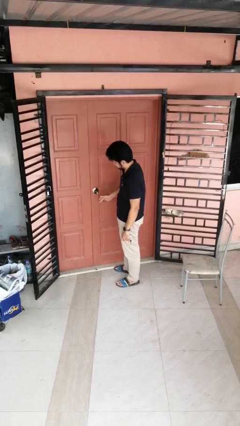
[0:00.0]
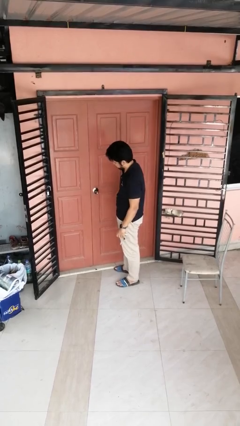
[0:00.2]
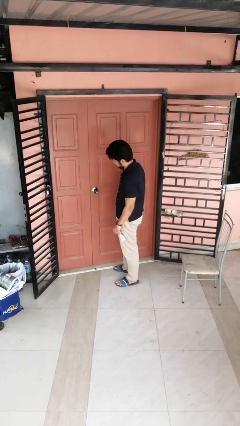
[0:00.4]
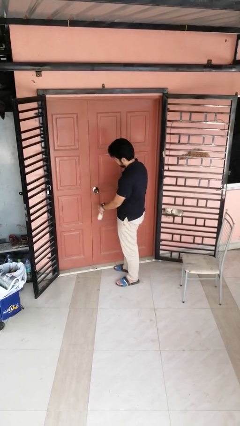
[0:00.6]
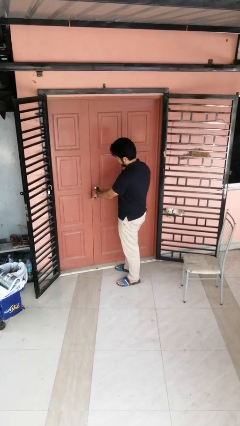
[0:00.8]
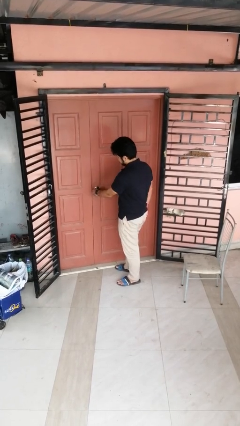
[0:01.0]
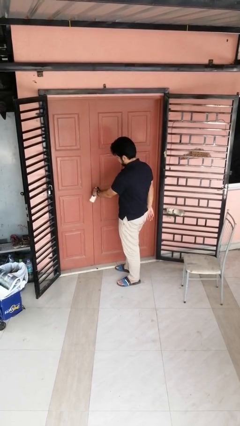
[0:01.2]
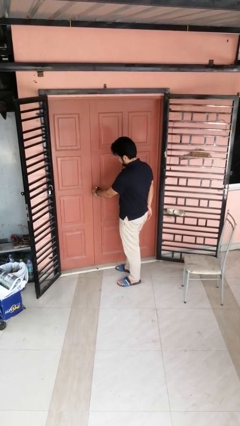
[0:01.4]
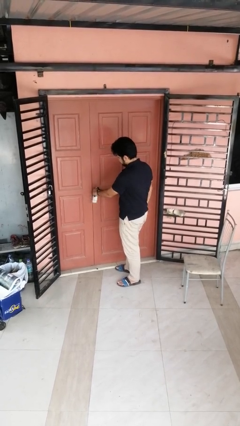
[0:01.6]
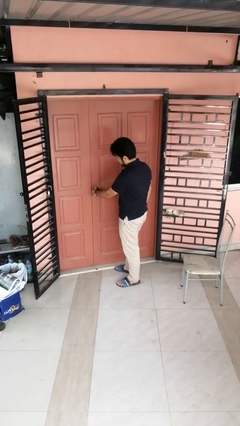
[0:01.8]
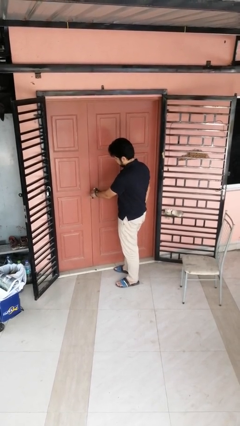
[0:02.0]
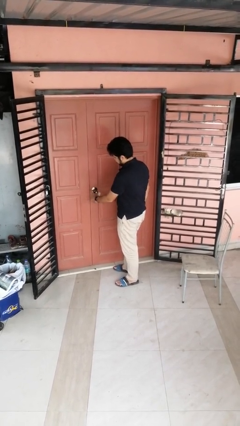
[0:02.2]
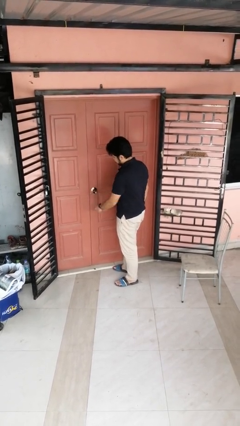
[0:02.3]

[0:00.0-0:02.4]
person locks door with keys

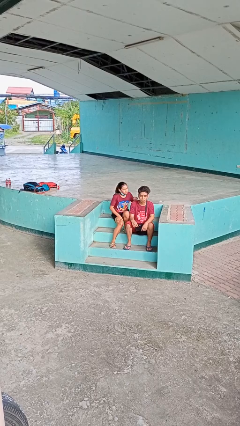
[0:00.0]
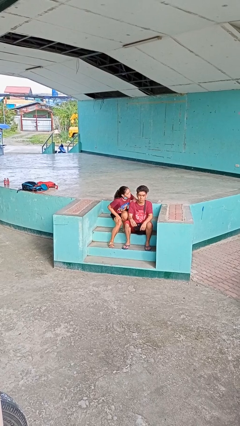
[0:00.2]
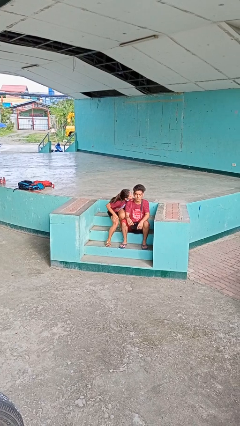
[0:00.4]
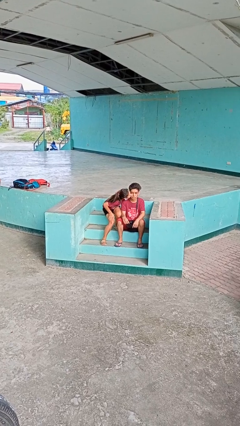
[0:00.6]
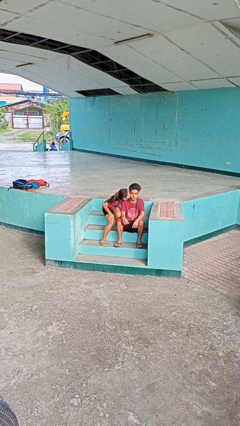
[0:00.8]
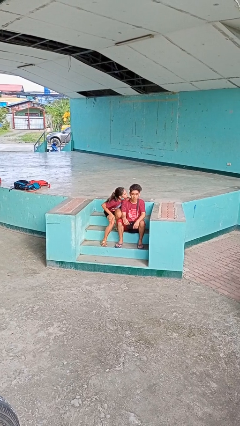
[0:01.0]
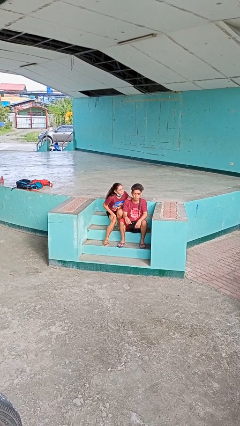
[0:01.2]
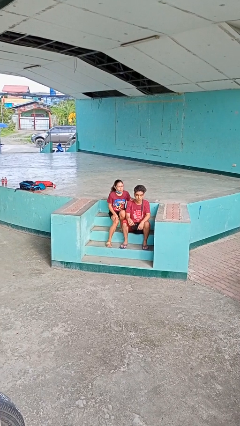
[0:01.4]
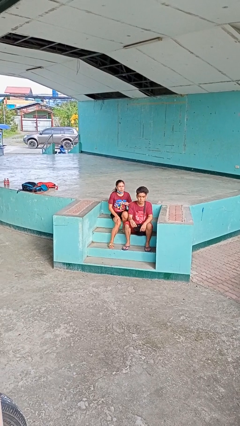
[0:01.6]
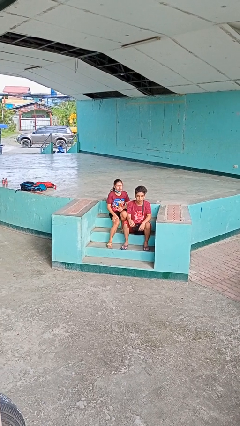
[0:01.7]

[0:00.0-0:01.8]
person kisses cheek of person

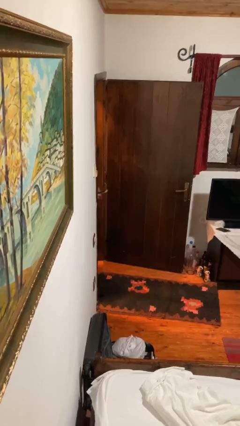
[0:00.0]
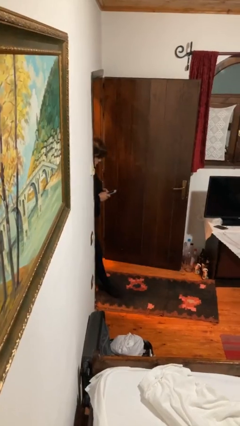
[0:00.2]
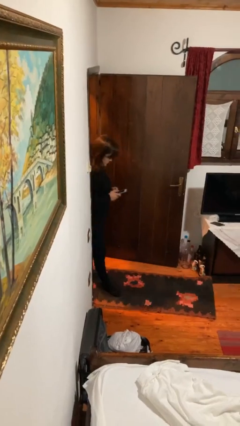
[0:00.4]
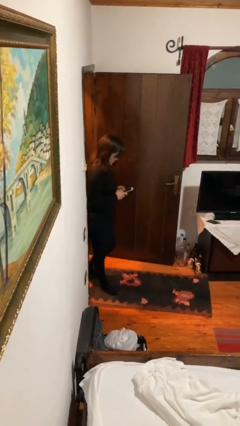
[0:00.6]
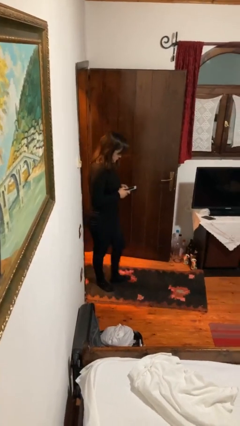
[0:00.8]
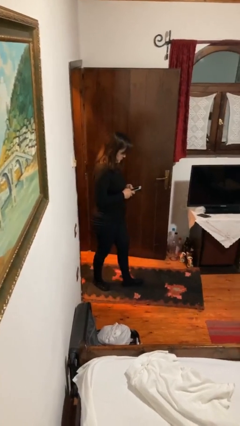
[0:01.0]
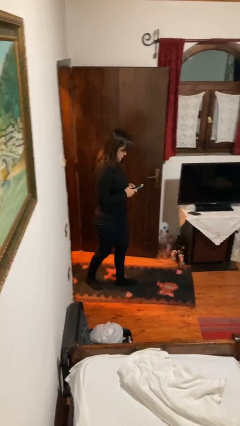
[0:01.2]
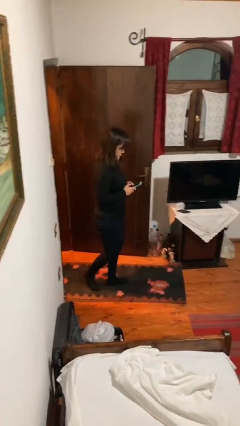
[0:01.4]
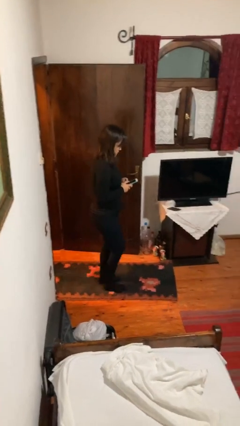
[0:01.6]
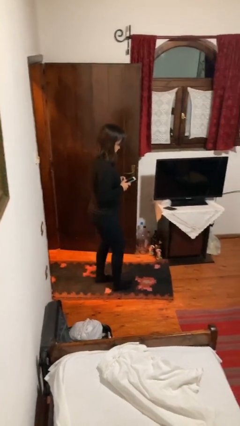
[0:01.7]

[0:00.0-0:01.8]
person enters scene through structure

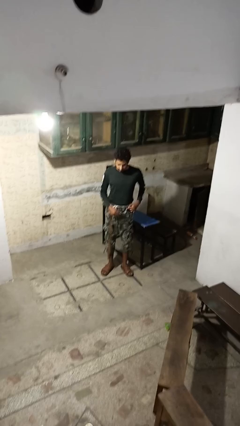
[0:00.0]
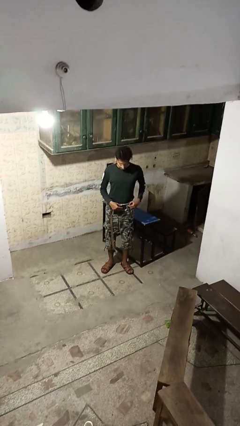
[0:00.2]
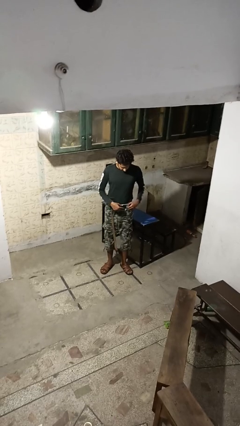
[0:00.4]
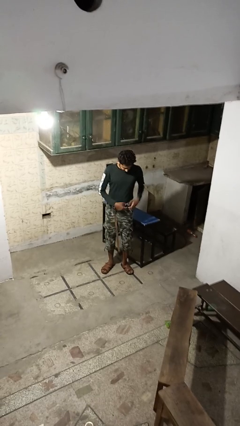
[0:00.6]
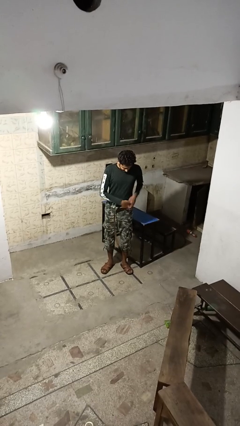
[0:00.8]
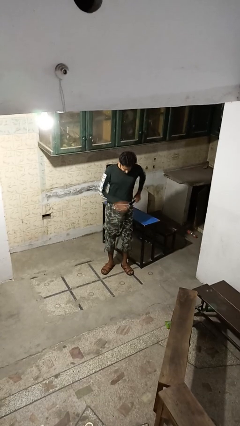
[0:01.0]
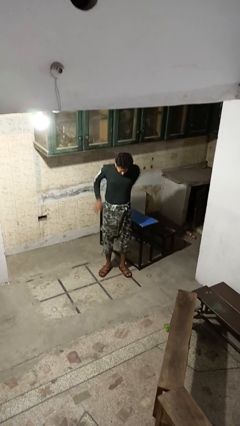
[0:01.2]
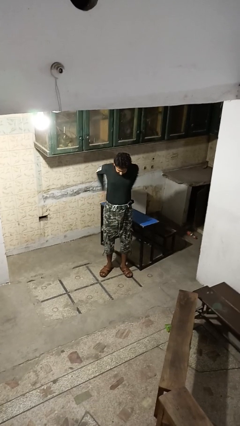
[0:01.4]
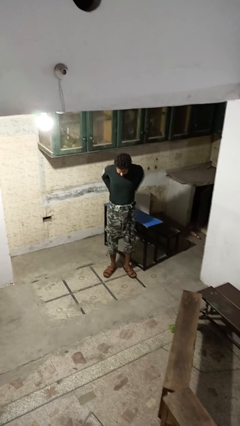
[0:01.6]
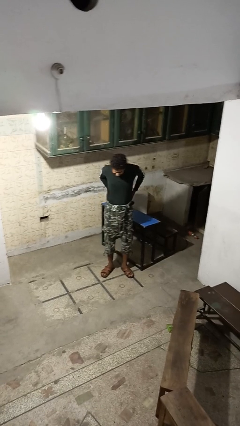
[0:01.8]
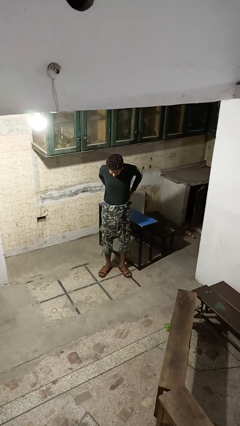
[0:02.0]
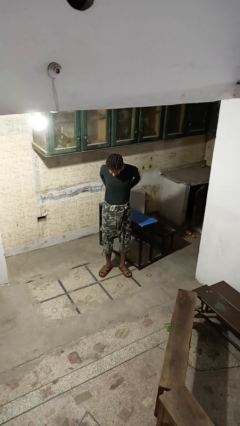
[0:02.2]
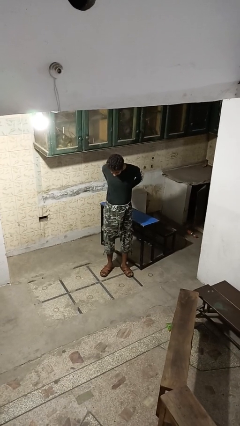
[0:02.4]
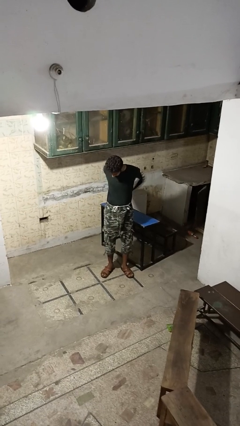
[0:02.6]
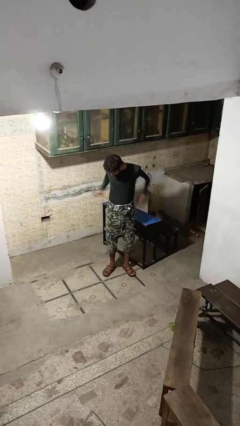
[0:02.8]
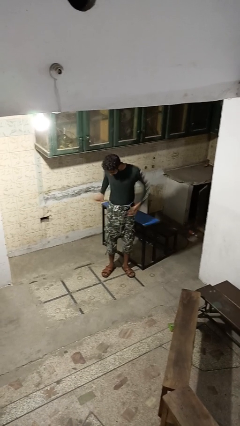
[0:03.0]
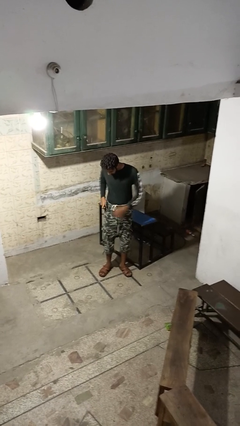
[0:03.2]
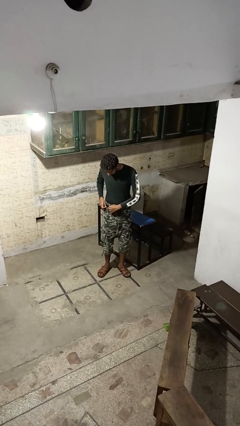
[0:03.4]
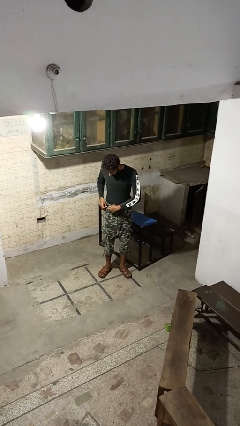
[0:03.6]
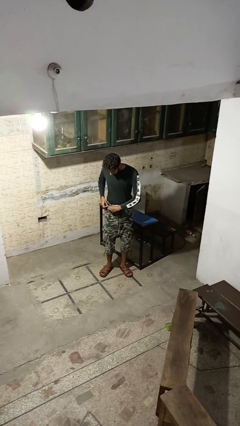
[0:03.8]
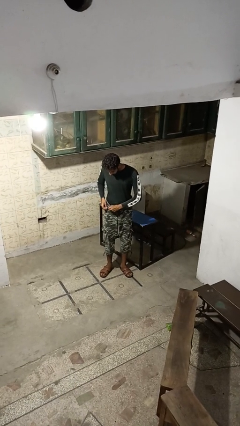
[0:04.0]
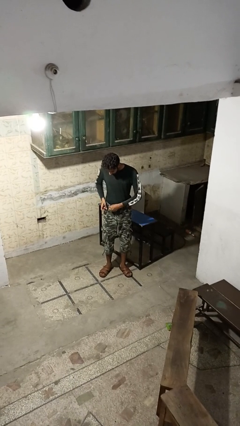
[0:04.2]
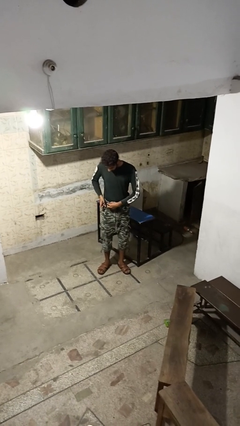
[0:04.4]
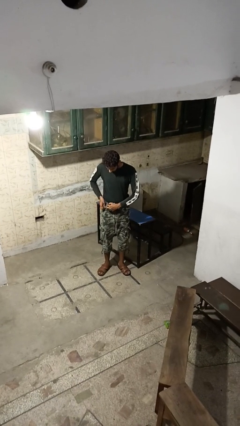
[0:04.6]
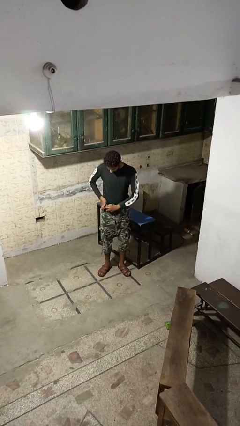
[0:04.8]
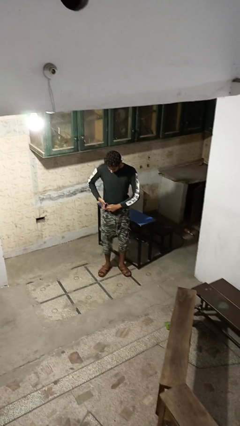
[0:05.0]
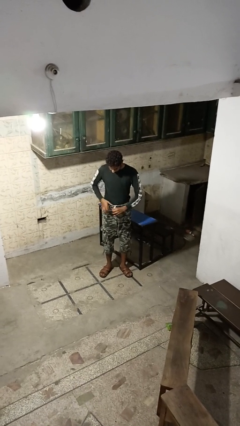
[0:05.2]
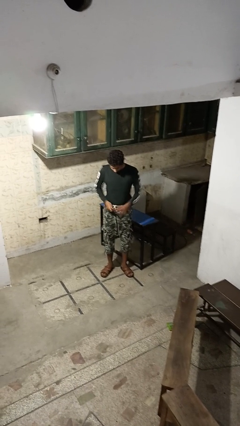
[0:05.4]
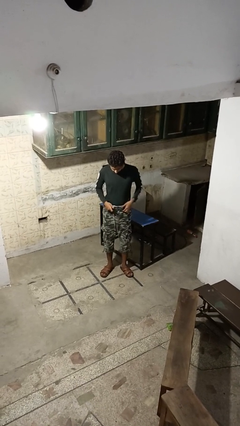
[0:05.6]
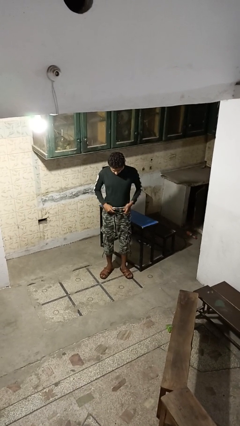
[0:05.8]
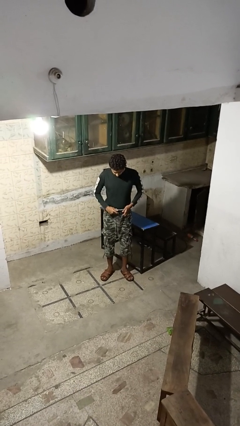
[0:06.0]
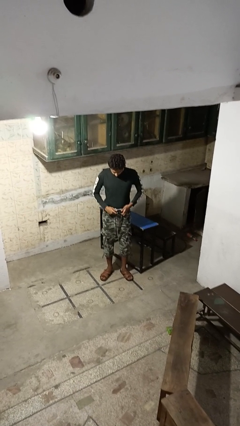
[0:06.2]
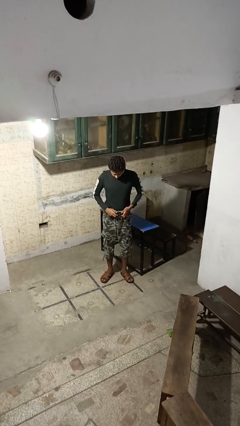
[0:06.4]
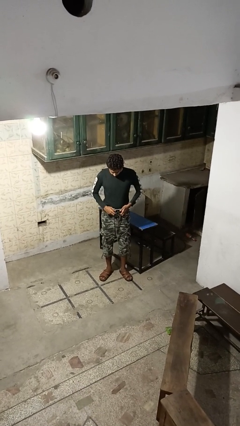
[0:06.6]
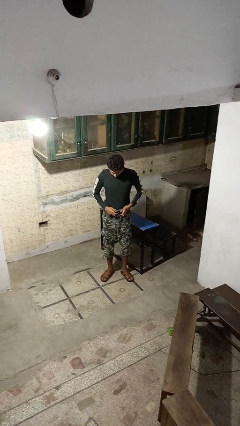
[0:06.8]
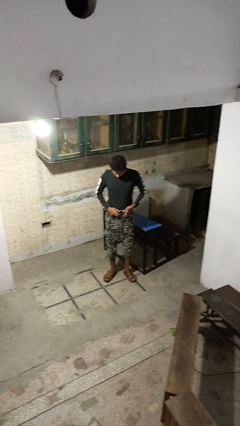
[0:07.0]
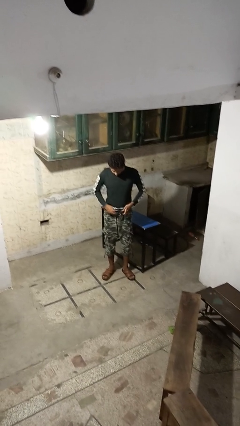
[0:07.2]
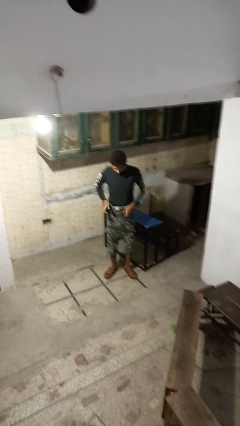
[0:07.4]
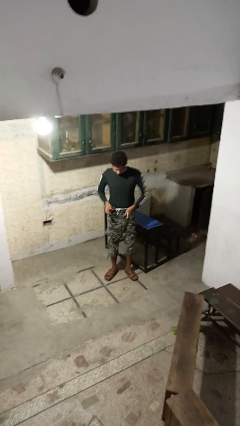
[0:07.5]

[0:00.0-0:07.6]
person puts on belt

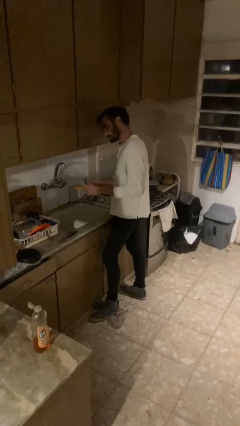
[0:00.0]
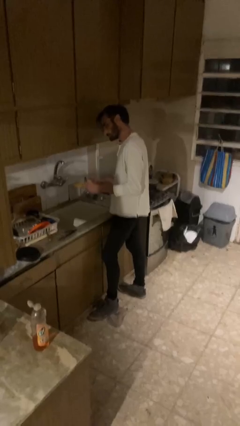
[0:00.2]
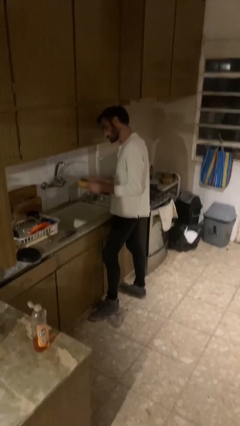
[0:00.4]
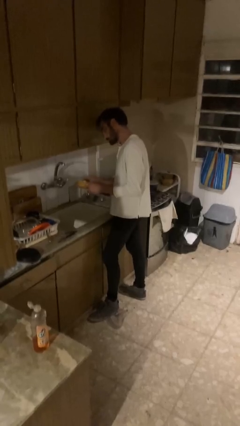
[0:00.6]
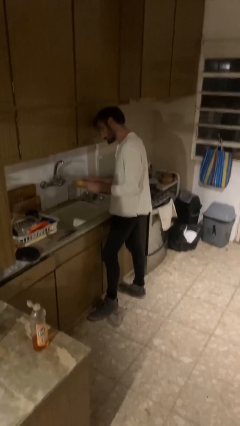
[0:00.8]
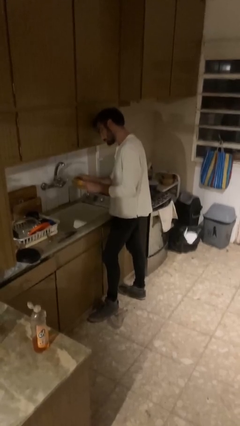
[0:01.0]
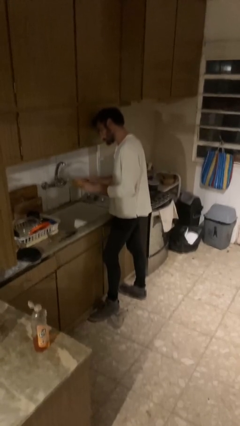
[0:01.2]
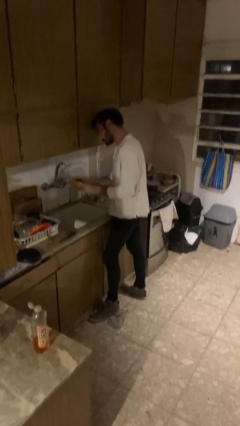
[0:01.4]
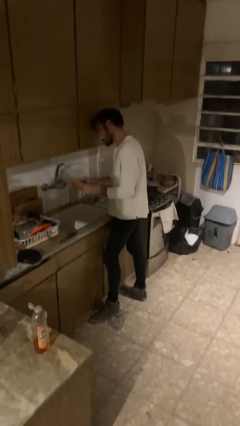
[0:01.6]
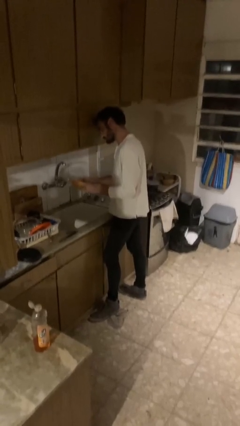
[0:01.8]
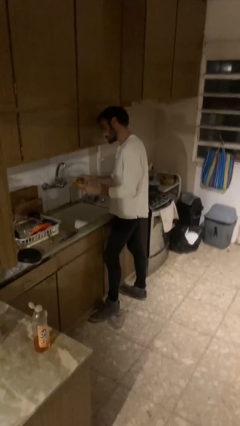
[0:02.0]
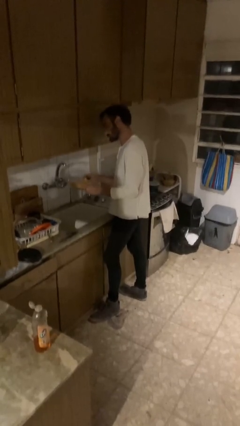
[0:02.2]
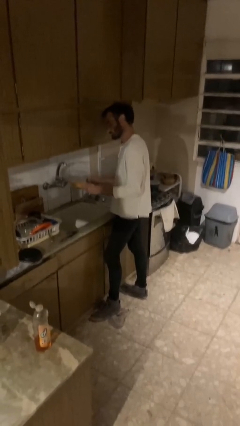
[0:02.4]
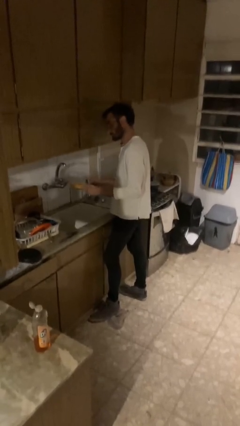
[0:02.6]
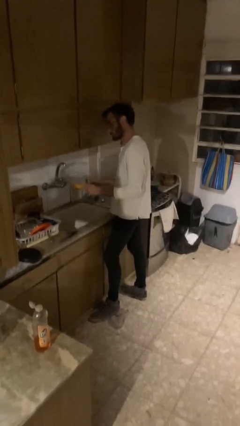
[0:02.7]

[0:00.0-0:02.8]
person washes dish

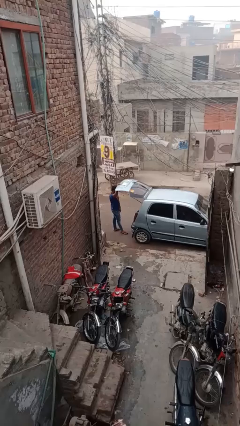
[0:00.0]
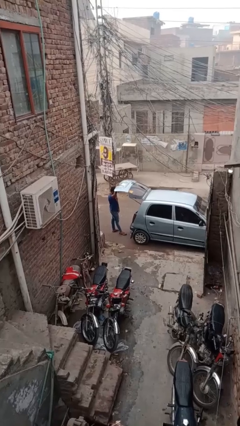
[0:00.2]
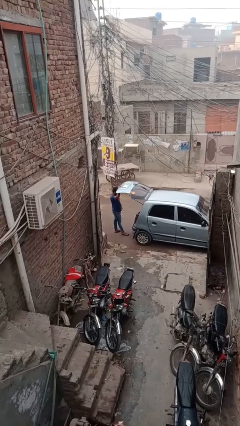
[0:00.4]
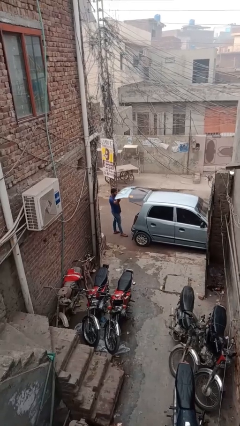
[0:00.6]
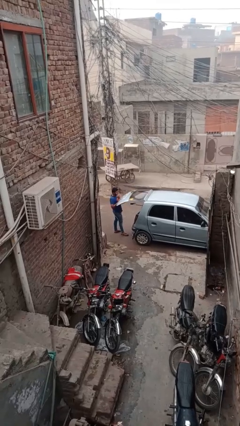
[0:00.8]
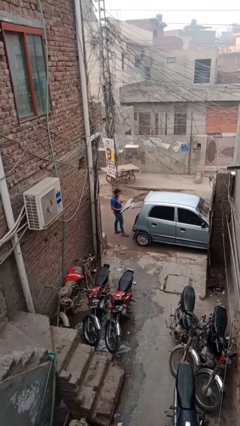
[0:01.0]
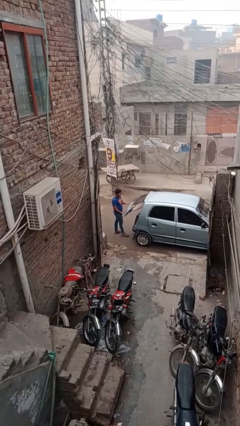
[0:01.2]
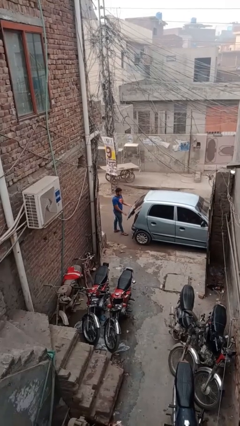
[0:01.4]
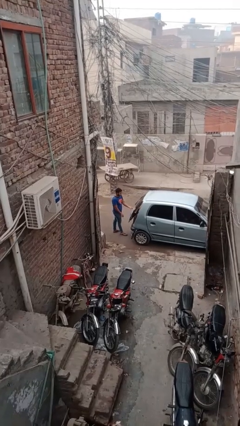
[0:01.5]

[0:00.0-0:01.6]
person closes car trunk
